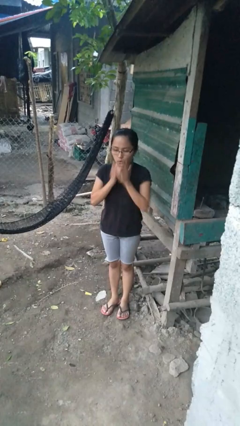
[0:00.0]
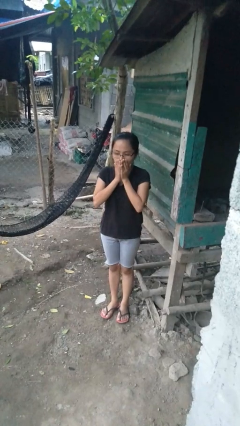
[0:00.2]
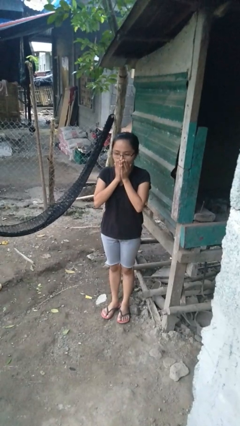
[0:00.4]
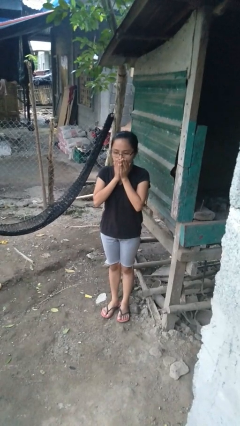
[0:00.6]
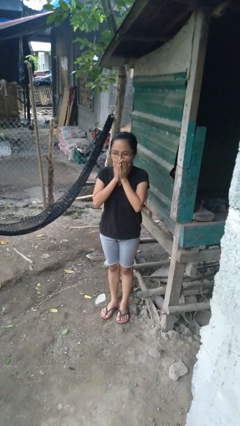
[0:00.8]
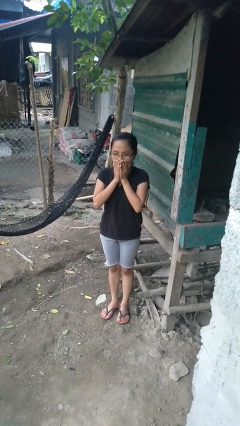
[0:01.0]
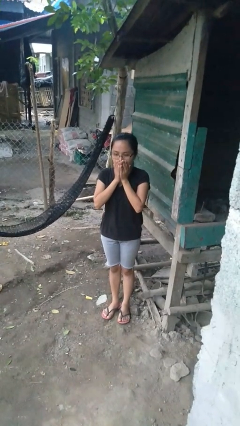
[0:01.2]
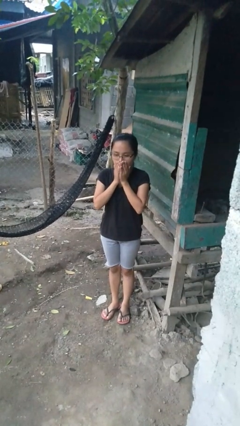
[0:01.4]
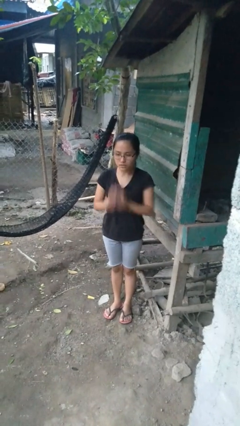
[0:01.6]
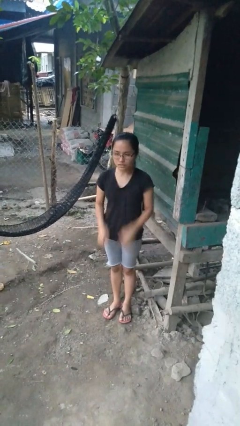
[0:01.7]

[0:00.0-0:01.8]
person blows into hands

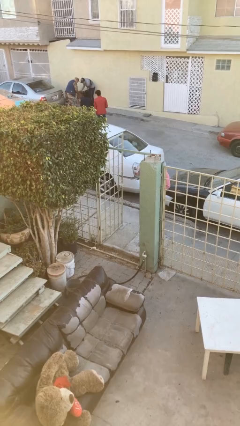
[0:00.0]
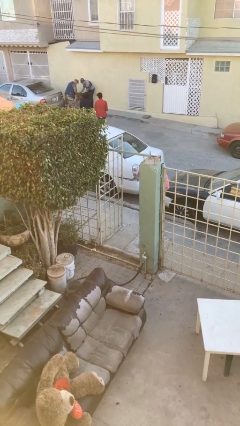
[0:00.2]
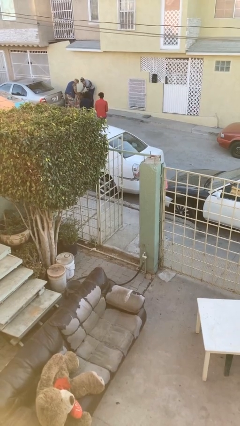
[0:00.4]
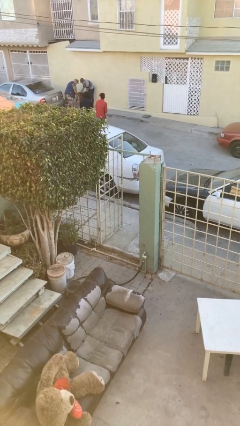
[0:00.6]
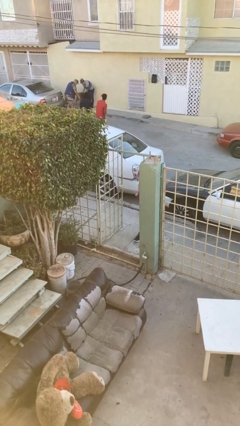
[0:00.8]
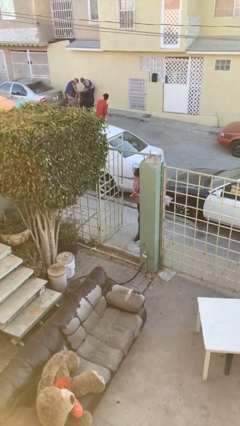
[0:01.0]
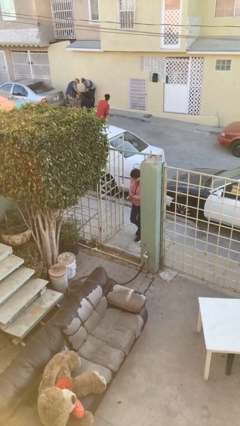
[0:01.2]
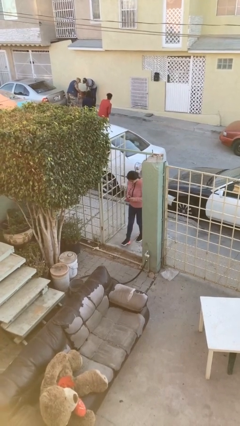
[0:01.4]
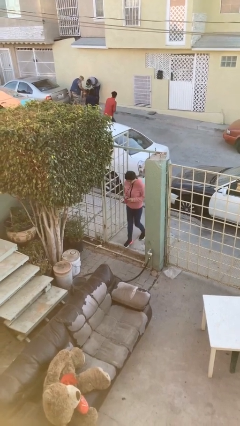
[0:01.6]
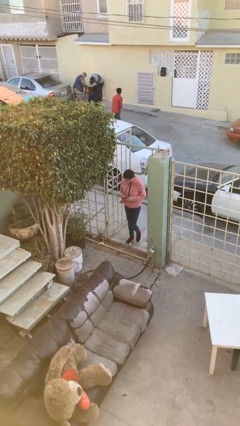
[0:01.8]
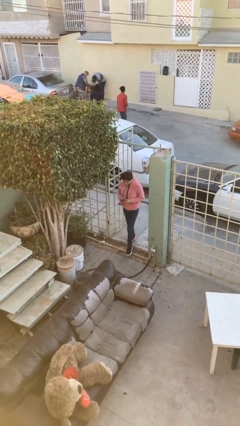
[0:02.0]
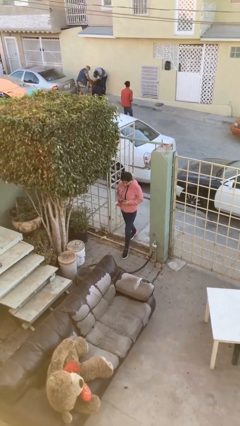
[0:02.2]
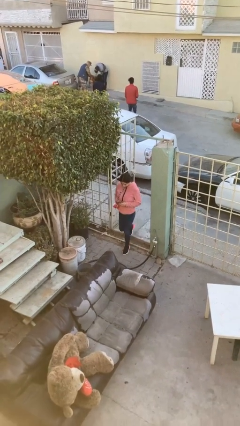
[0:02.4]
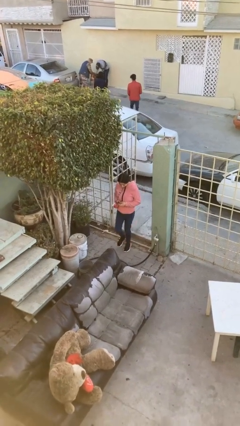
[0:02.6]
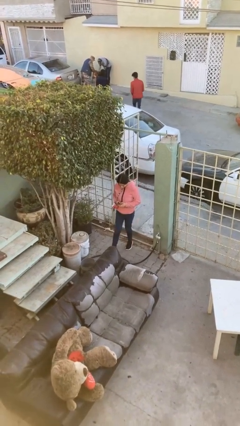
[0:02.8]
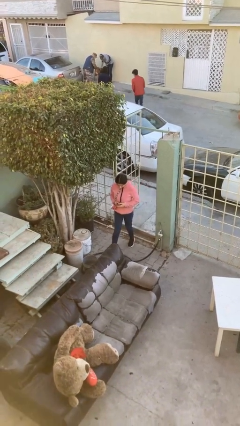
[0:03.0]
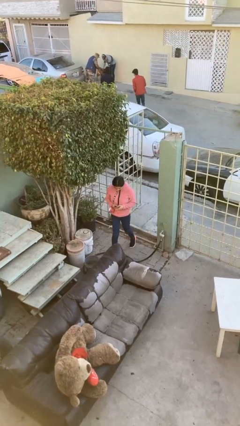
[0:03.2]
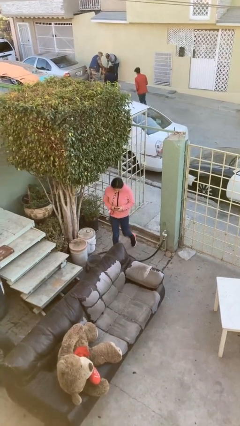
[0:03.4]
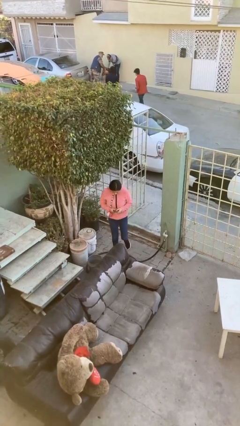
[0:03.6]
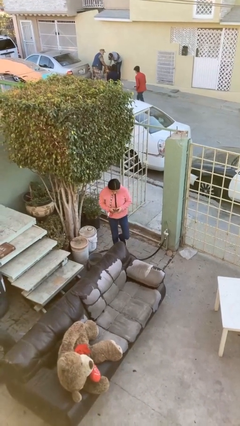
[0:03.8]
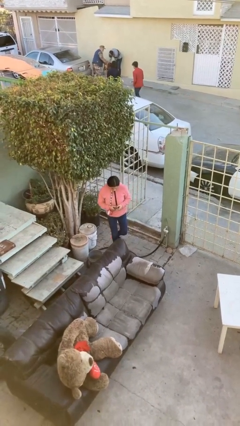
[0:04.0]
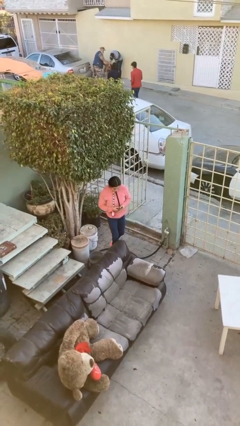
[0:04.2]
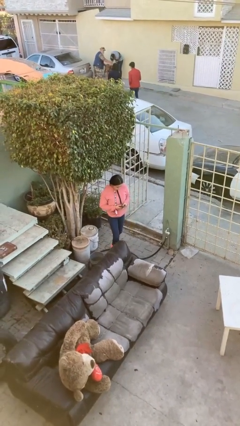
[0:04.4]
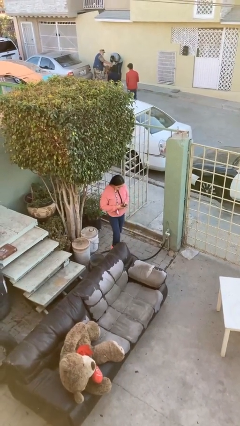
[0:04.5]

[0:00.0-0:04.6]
person enters scene through structure

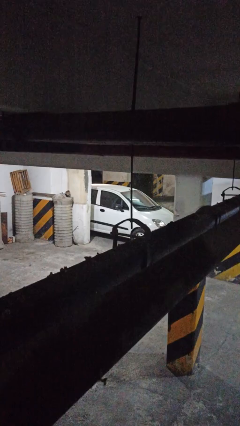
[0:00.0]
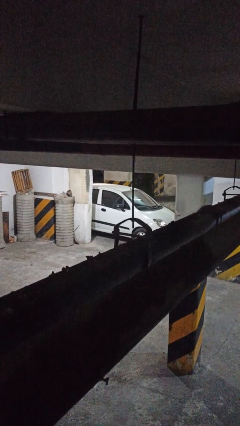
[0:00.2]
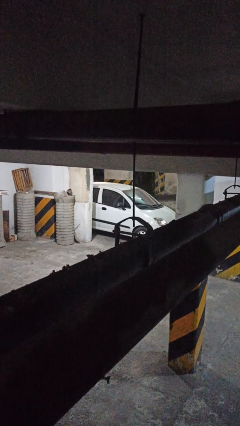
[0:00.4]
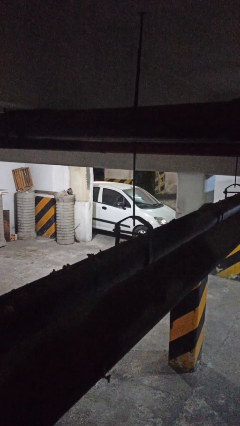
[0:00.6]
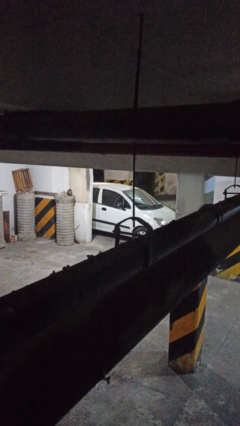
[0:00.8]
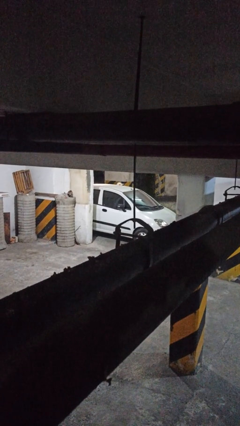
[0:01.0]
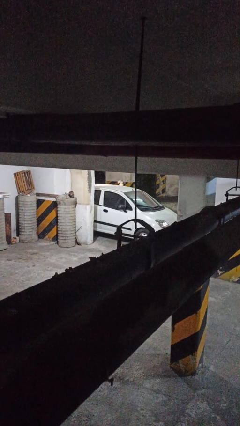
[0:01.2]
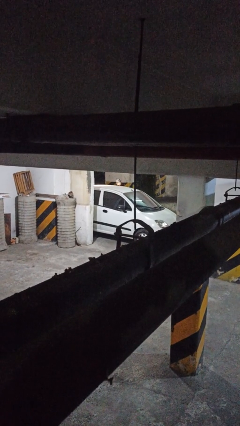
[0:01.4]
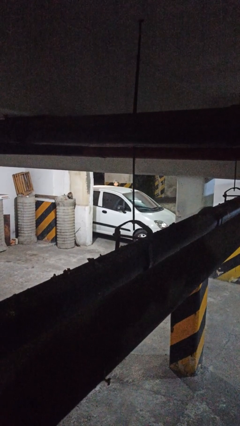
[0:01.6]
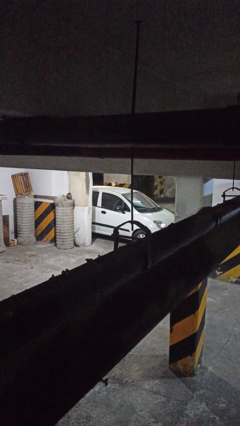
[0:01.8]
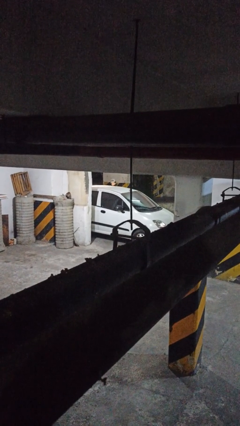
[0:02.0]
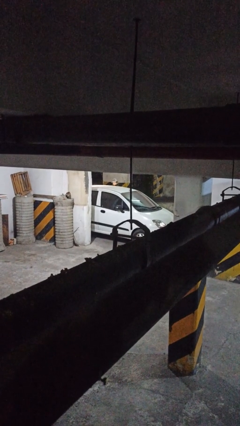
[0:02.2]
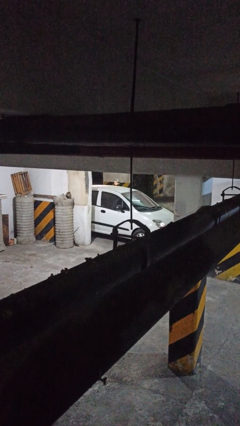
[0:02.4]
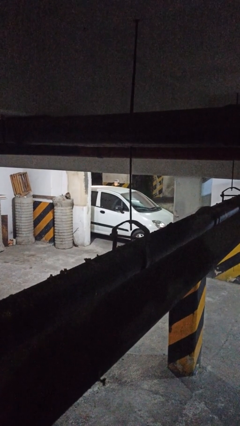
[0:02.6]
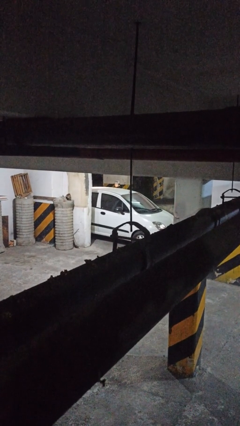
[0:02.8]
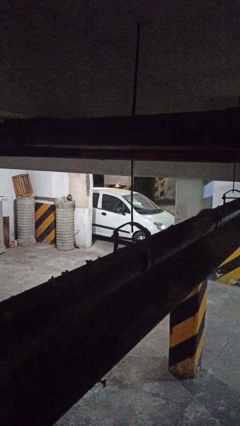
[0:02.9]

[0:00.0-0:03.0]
car drops off person

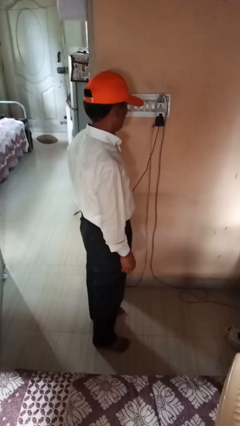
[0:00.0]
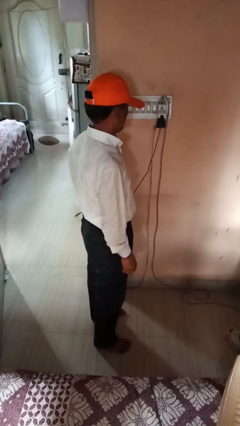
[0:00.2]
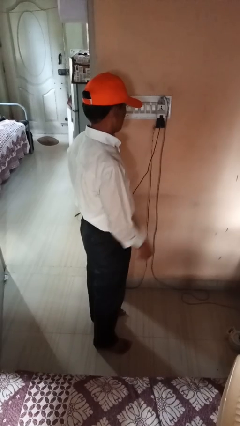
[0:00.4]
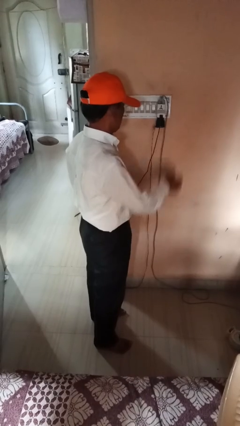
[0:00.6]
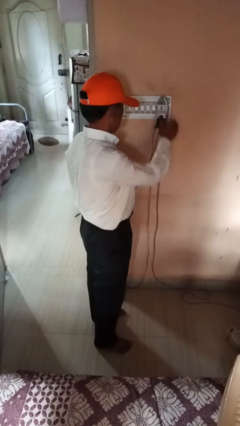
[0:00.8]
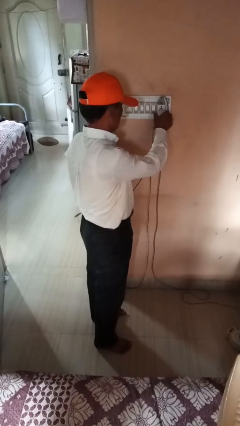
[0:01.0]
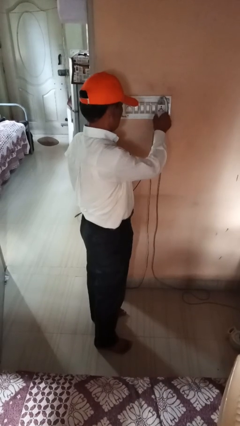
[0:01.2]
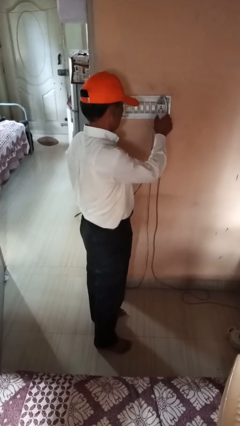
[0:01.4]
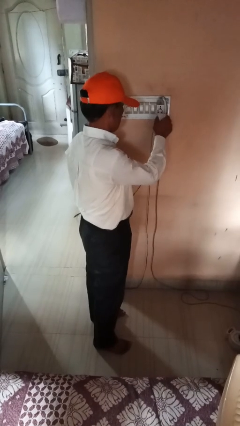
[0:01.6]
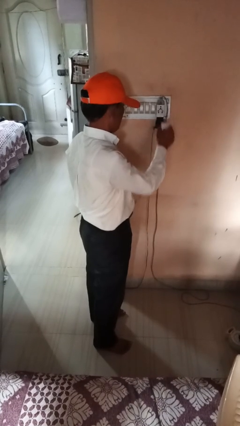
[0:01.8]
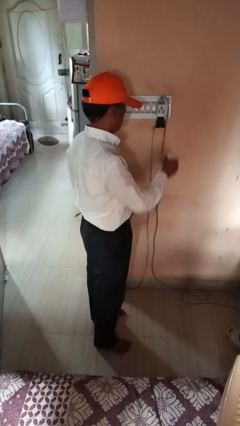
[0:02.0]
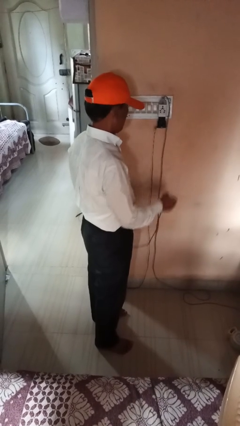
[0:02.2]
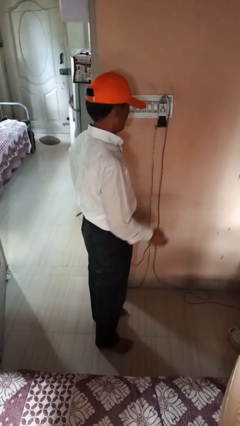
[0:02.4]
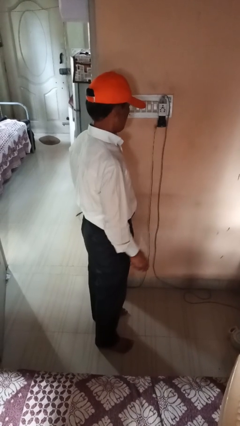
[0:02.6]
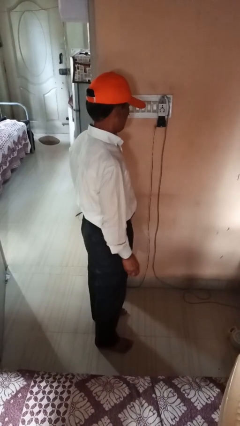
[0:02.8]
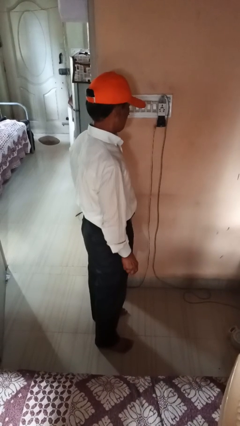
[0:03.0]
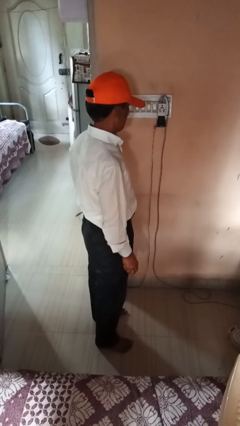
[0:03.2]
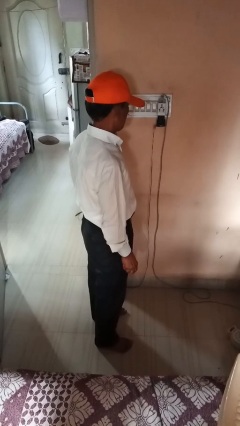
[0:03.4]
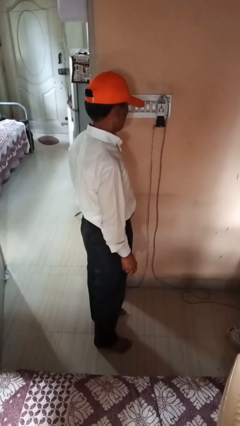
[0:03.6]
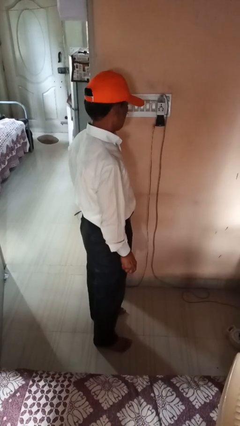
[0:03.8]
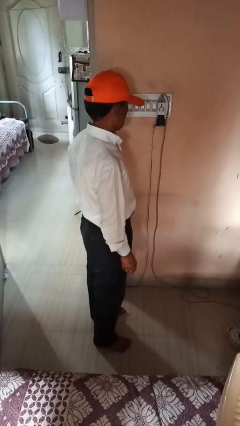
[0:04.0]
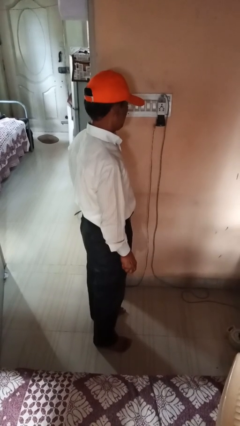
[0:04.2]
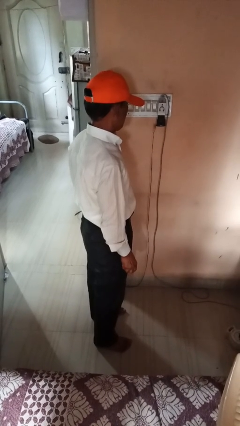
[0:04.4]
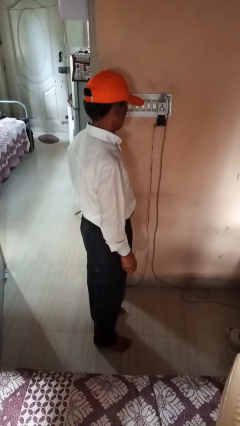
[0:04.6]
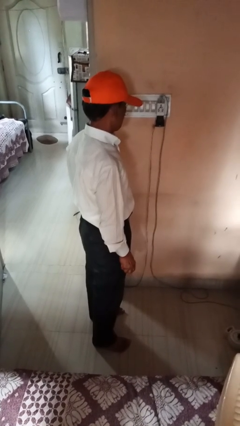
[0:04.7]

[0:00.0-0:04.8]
person unplugs from electrical socket

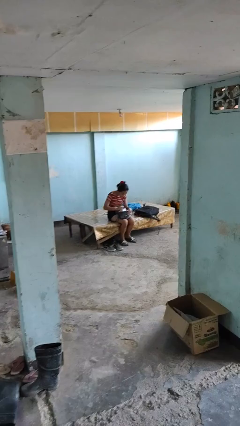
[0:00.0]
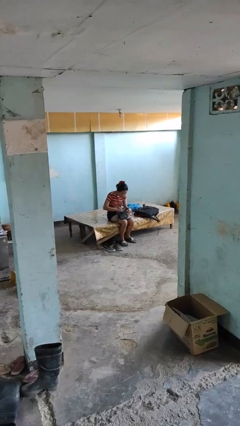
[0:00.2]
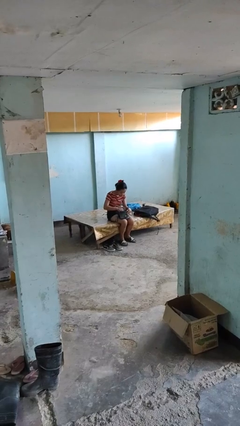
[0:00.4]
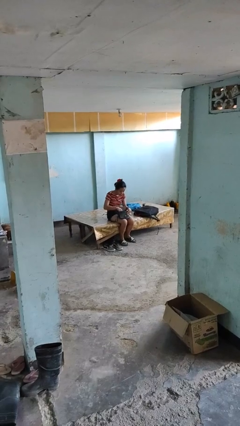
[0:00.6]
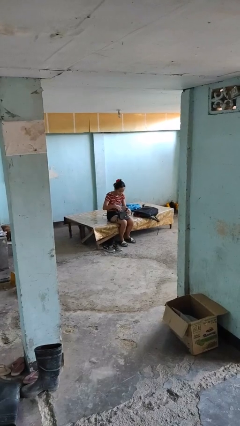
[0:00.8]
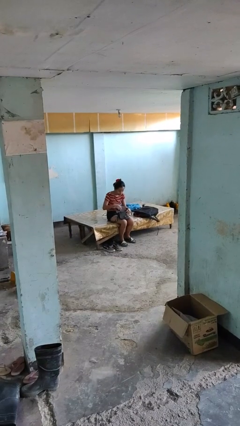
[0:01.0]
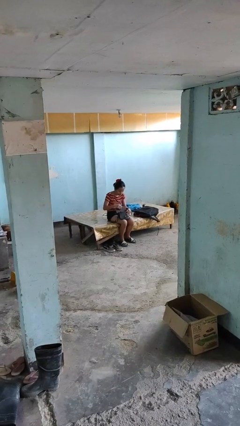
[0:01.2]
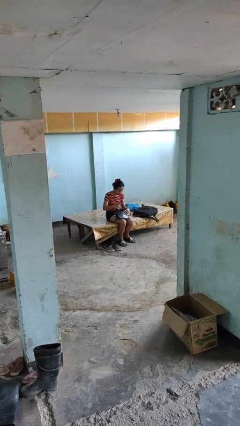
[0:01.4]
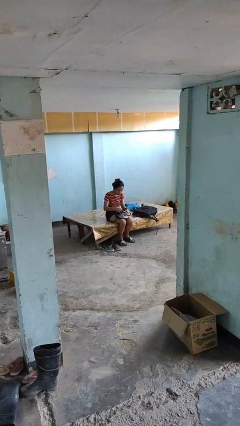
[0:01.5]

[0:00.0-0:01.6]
person puts object into purse

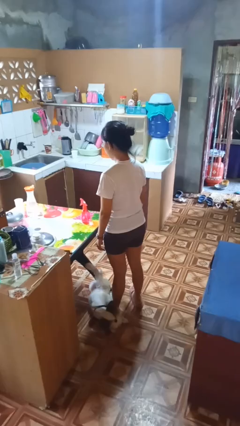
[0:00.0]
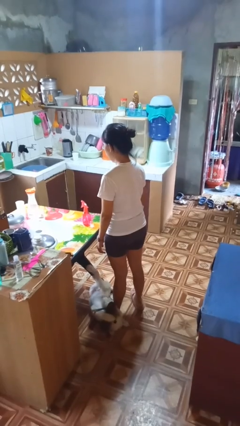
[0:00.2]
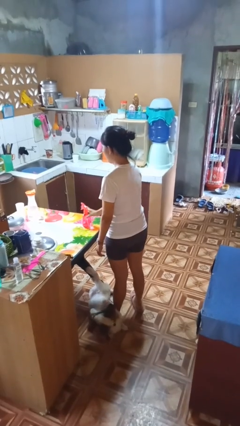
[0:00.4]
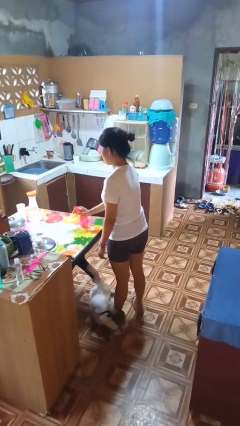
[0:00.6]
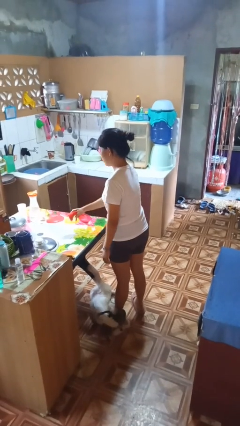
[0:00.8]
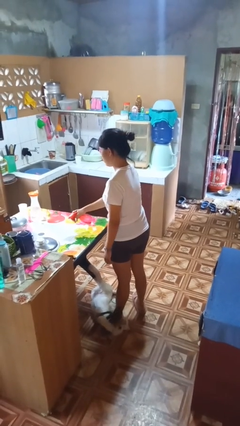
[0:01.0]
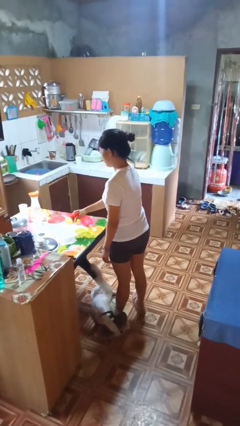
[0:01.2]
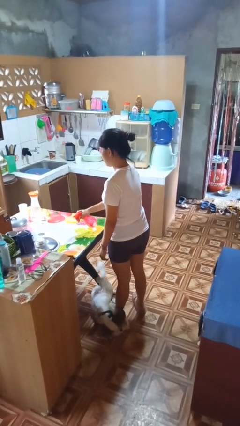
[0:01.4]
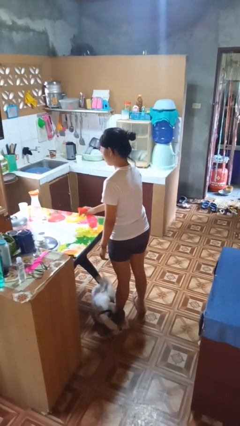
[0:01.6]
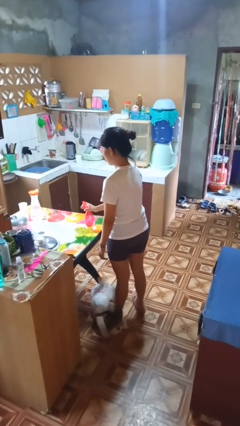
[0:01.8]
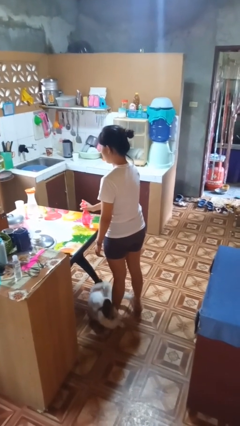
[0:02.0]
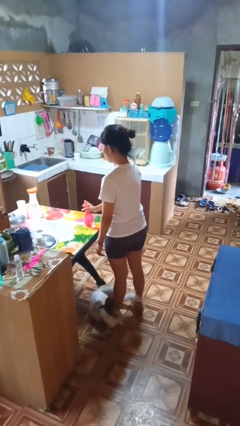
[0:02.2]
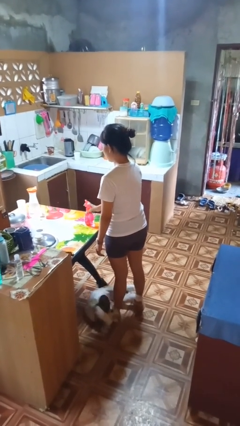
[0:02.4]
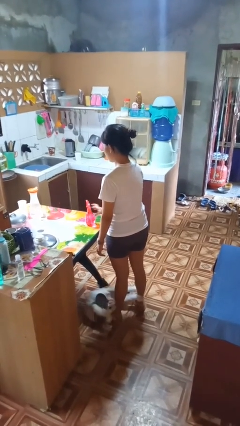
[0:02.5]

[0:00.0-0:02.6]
person sprays from bottle
